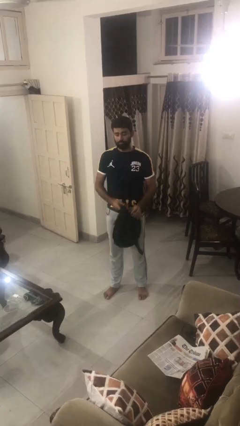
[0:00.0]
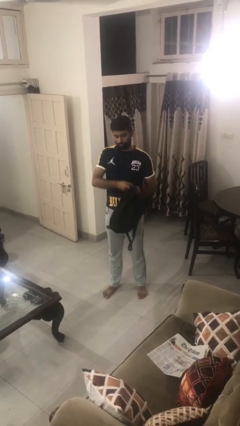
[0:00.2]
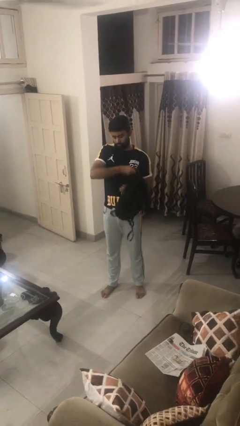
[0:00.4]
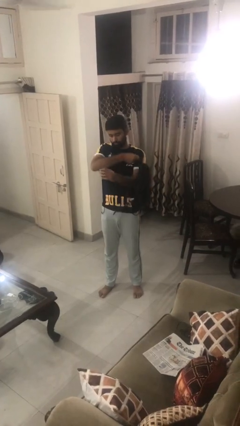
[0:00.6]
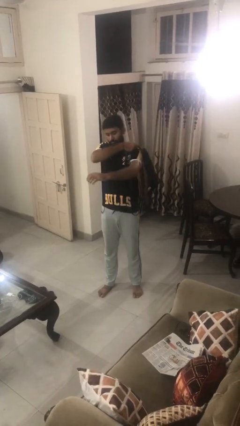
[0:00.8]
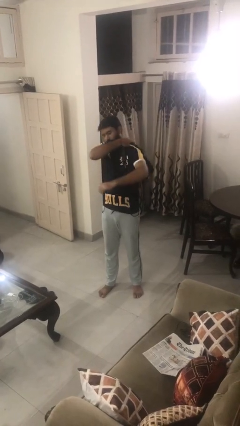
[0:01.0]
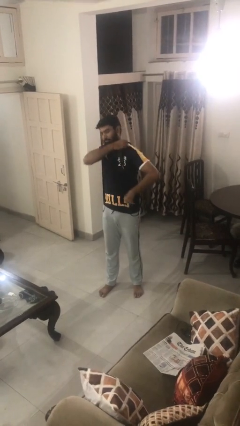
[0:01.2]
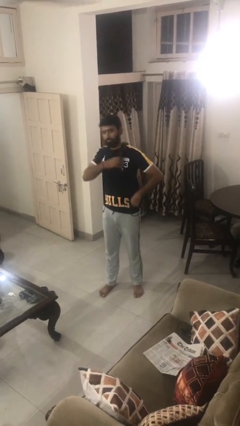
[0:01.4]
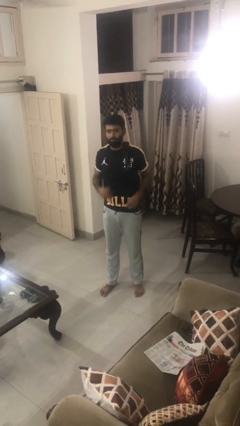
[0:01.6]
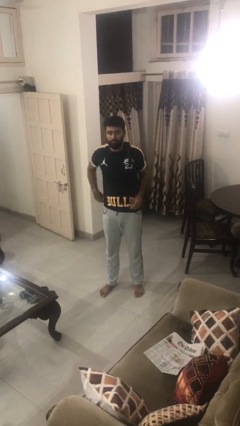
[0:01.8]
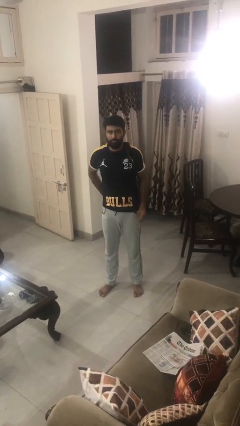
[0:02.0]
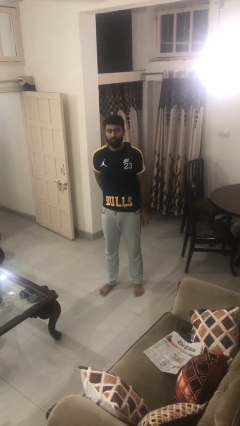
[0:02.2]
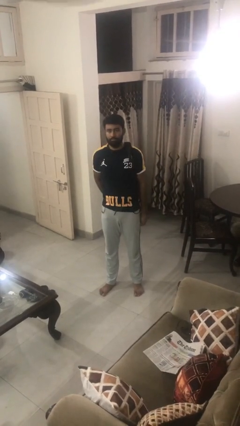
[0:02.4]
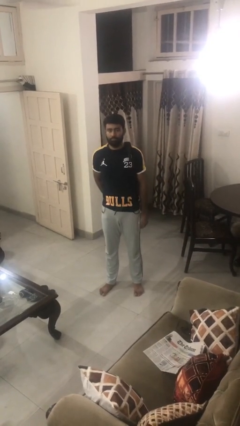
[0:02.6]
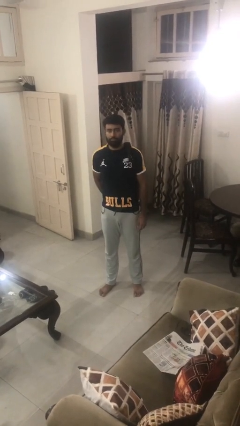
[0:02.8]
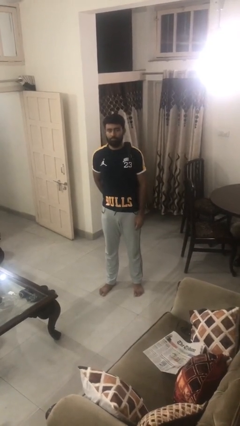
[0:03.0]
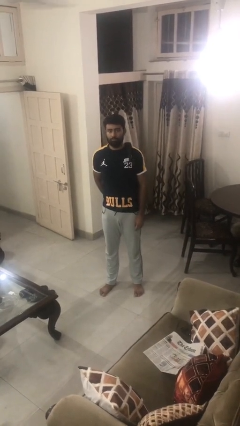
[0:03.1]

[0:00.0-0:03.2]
person puts on backpack

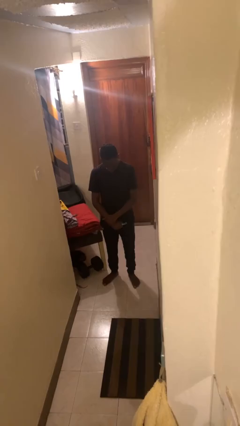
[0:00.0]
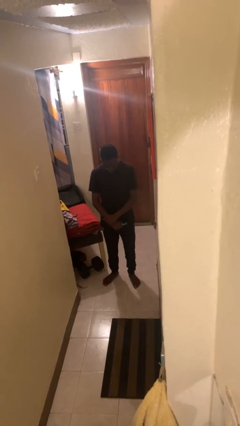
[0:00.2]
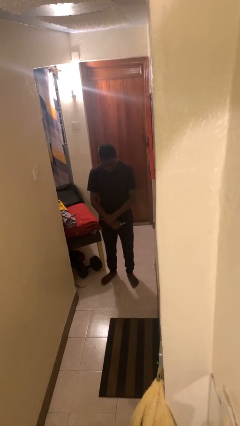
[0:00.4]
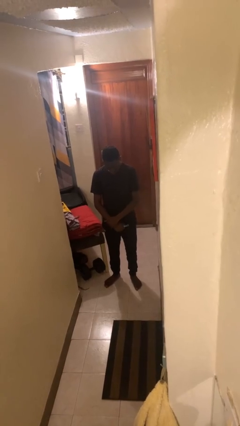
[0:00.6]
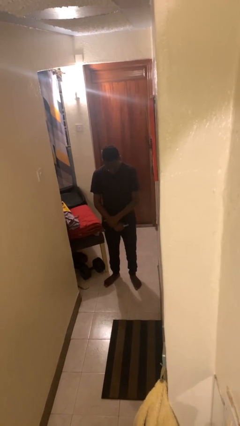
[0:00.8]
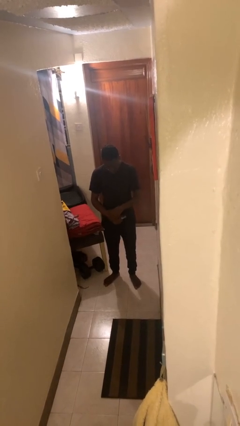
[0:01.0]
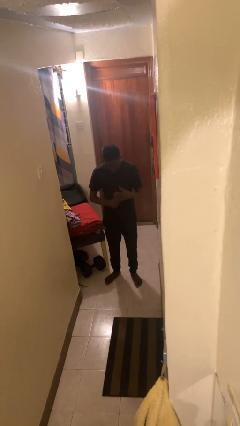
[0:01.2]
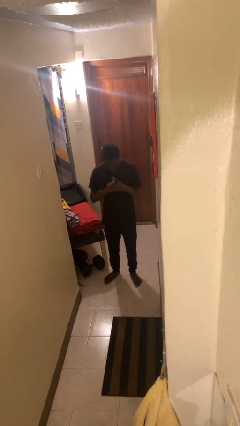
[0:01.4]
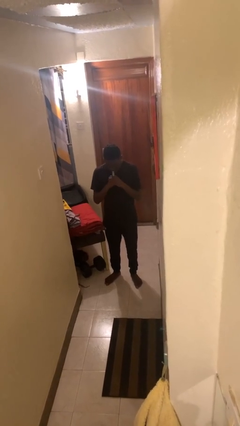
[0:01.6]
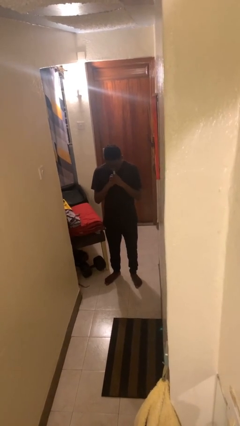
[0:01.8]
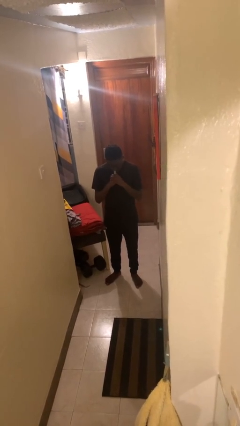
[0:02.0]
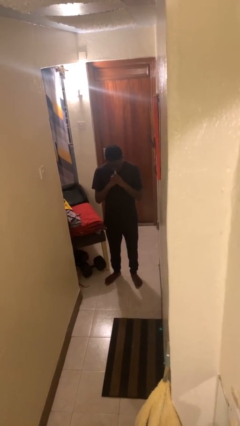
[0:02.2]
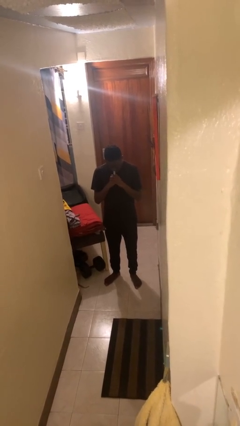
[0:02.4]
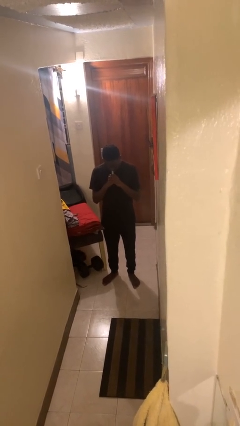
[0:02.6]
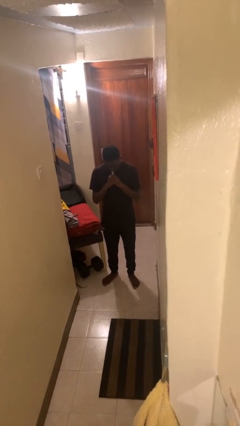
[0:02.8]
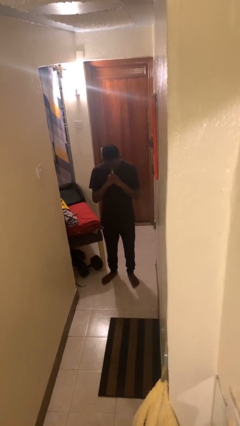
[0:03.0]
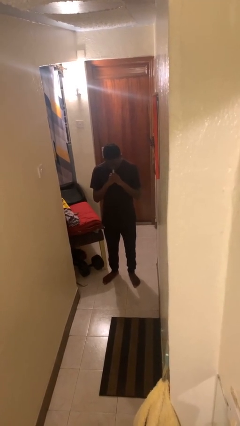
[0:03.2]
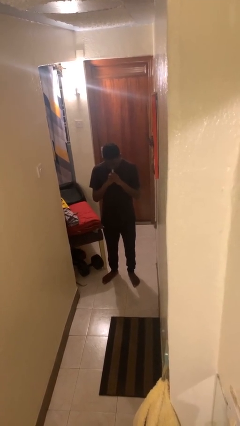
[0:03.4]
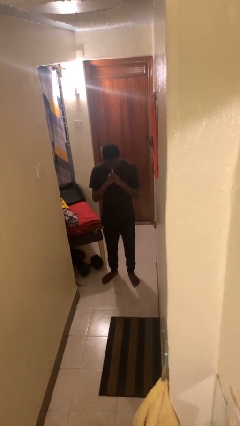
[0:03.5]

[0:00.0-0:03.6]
person vapes

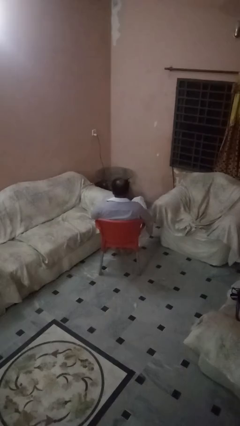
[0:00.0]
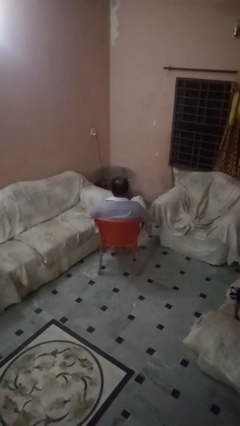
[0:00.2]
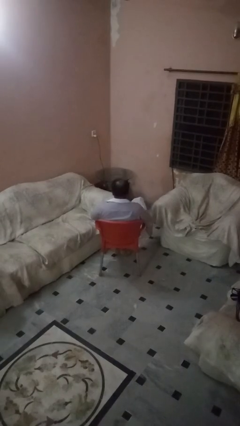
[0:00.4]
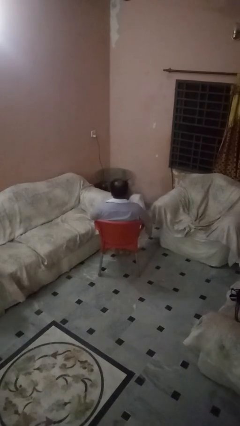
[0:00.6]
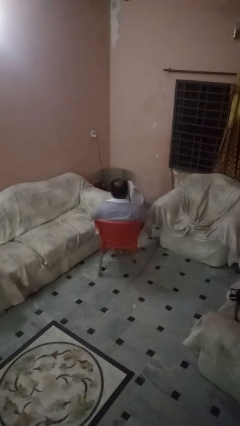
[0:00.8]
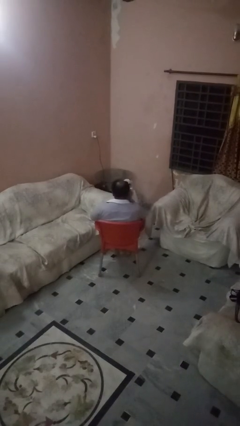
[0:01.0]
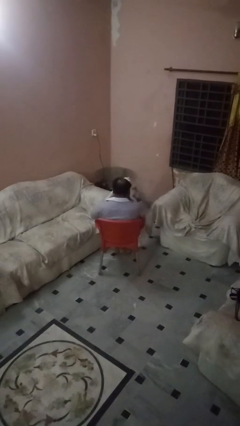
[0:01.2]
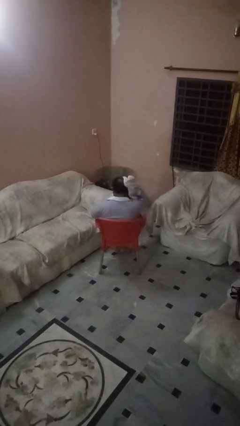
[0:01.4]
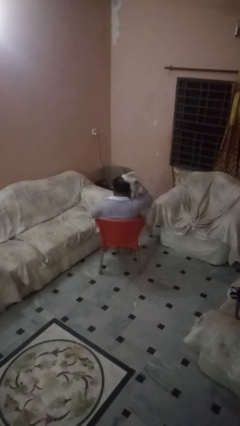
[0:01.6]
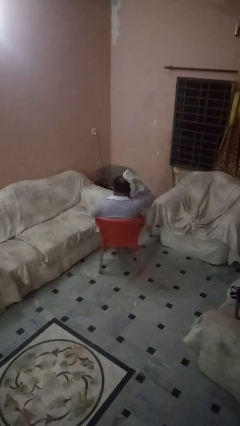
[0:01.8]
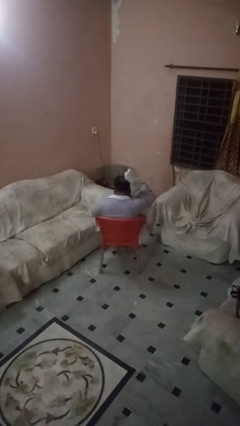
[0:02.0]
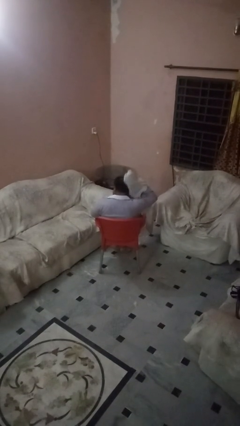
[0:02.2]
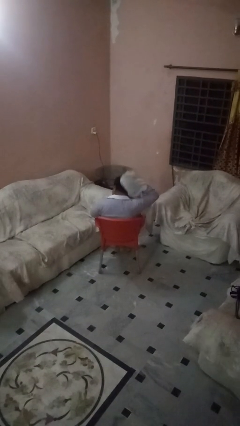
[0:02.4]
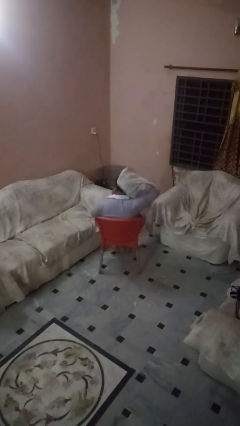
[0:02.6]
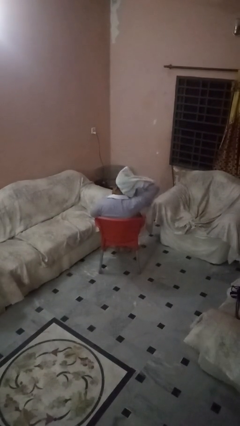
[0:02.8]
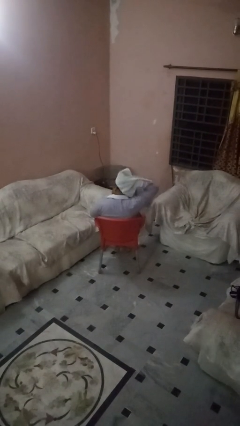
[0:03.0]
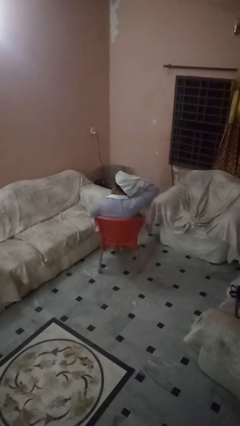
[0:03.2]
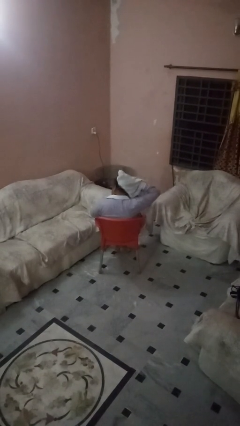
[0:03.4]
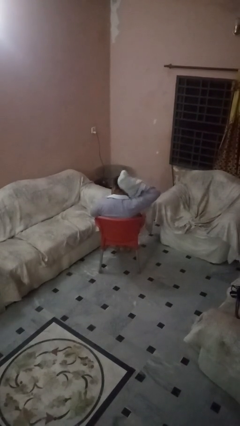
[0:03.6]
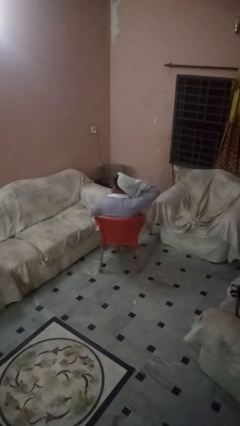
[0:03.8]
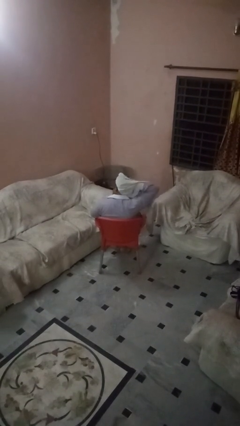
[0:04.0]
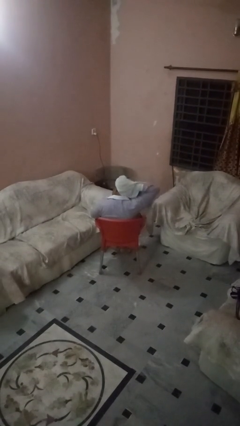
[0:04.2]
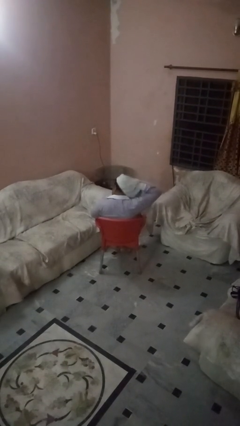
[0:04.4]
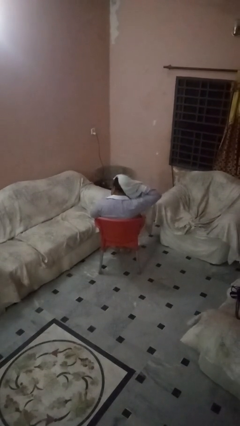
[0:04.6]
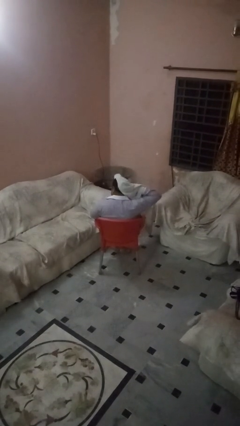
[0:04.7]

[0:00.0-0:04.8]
person dries hair with towel

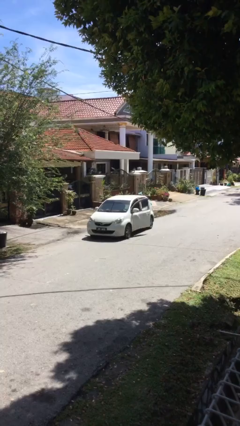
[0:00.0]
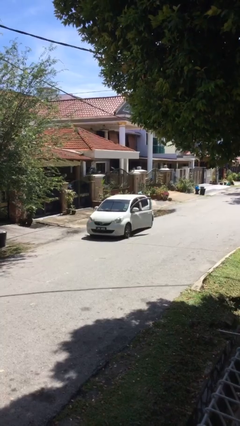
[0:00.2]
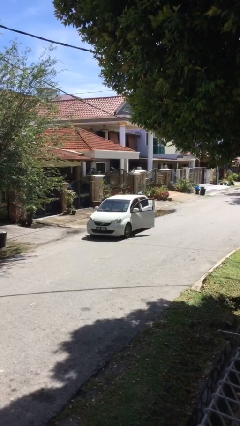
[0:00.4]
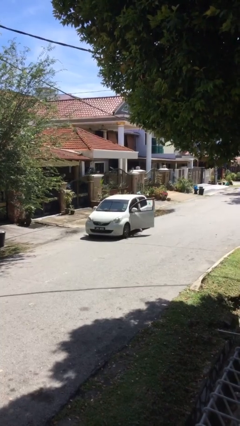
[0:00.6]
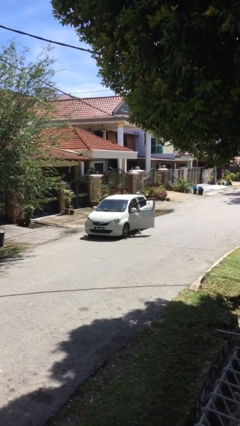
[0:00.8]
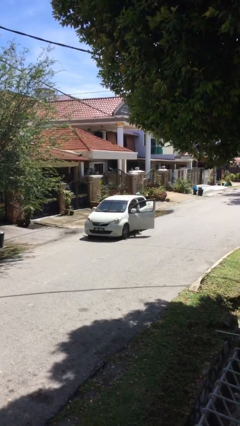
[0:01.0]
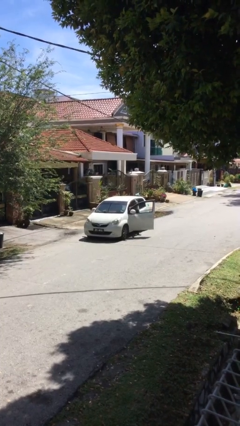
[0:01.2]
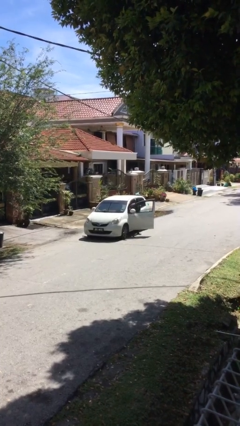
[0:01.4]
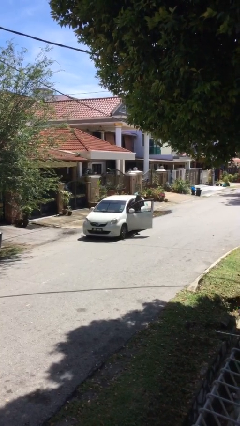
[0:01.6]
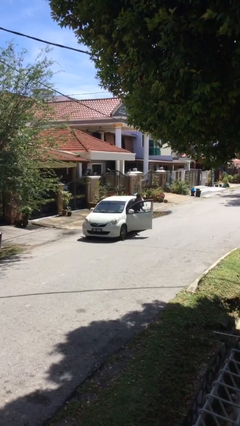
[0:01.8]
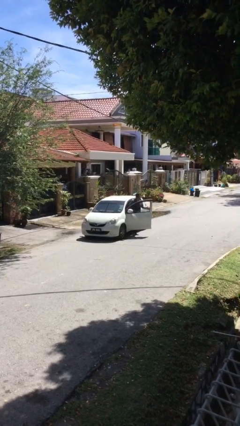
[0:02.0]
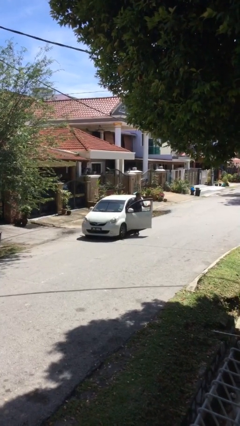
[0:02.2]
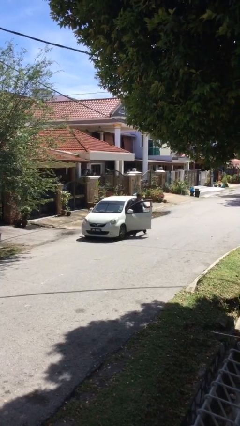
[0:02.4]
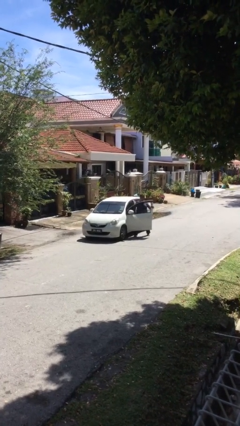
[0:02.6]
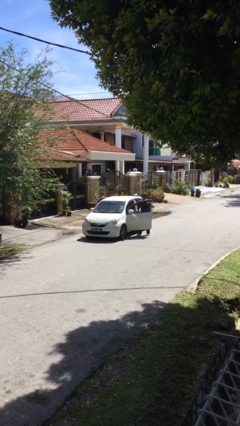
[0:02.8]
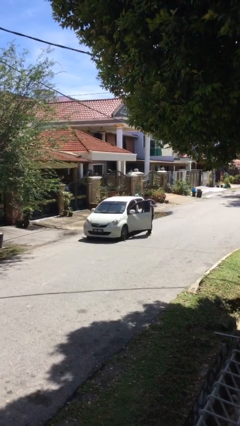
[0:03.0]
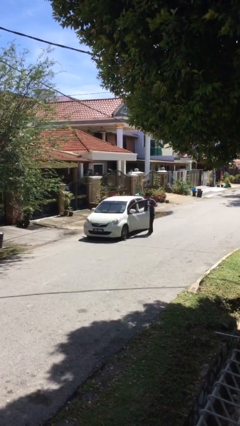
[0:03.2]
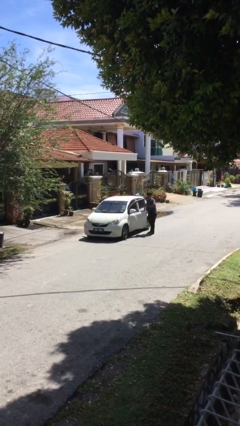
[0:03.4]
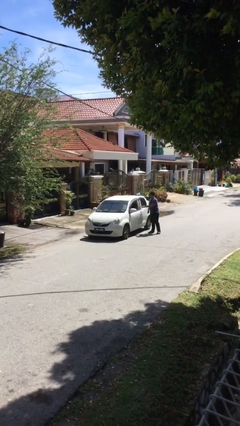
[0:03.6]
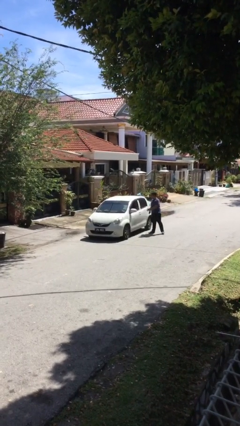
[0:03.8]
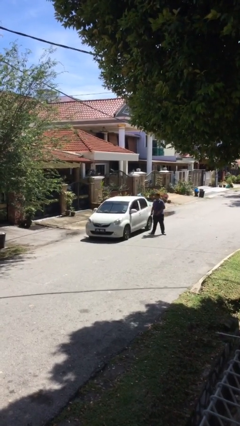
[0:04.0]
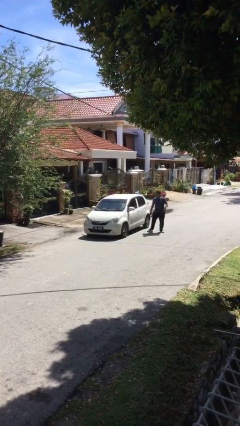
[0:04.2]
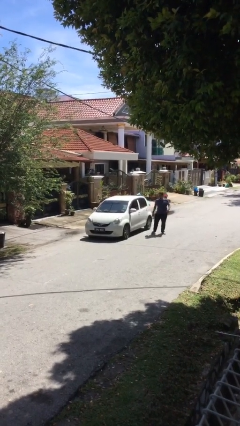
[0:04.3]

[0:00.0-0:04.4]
car drops off person

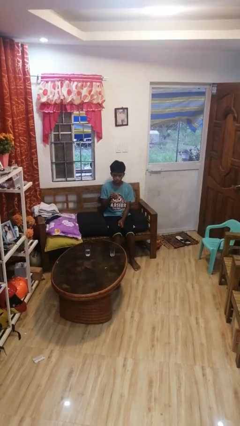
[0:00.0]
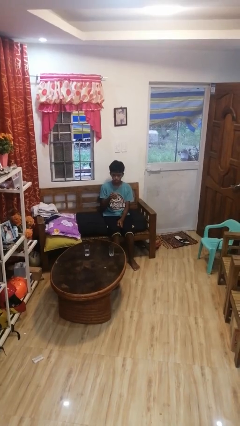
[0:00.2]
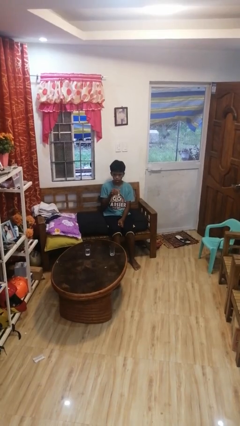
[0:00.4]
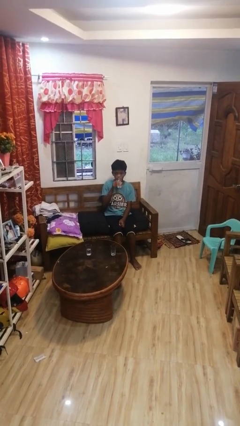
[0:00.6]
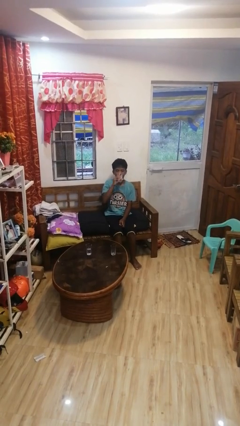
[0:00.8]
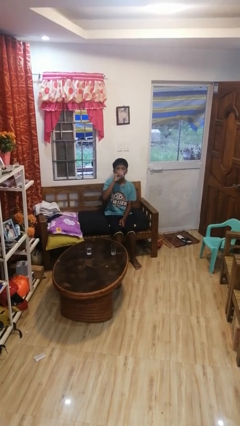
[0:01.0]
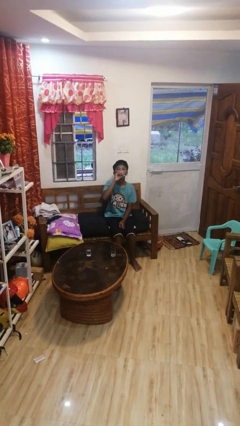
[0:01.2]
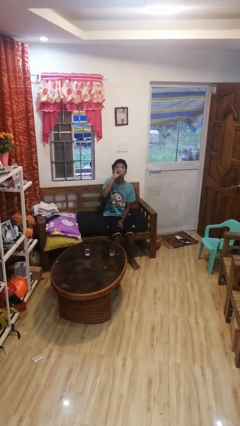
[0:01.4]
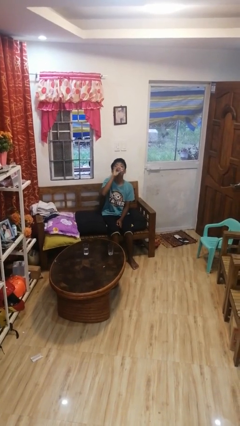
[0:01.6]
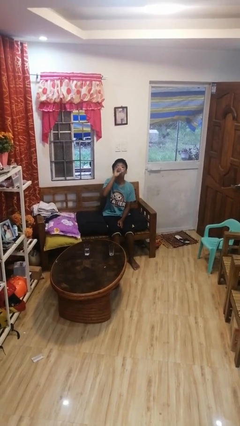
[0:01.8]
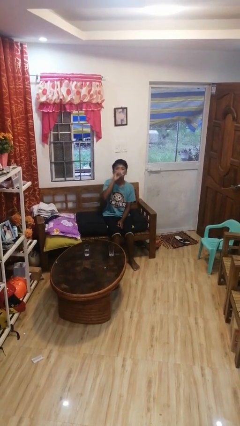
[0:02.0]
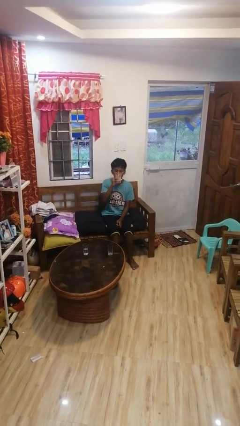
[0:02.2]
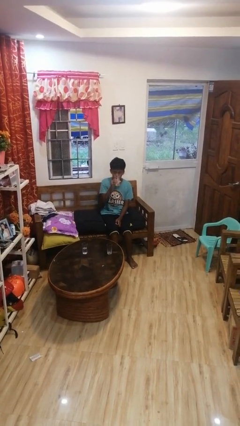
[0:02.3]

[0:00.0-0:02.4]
person drinks from shotglass
